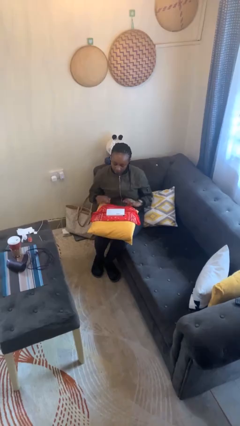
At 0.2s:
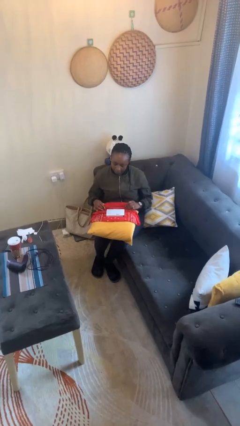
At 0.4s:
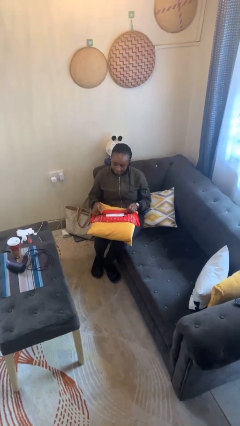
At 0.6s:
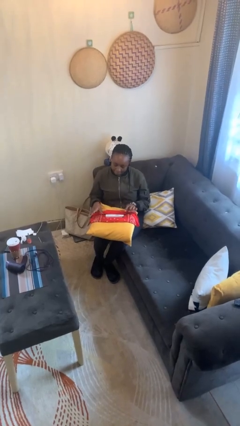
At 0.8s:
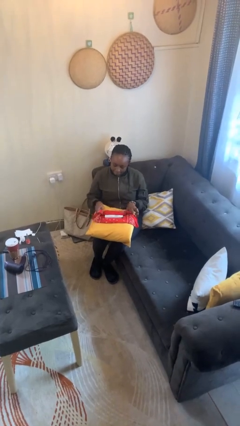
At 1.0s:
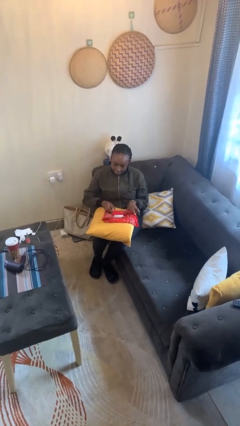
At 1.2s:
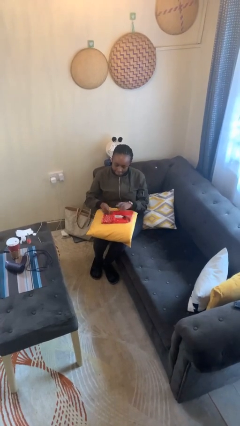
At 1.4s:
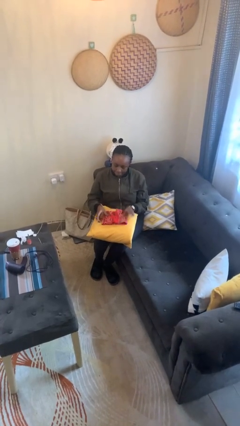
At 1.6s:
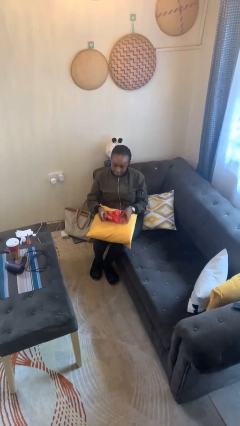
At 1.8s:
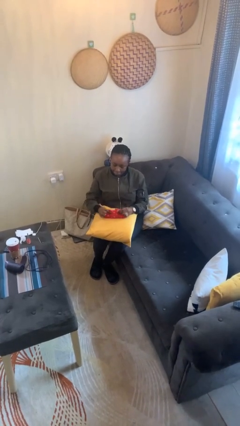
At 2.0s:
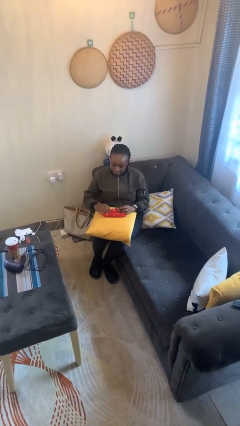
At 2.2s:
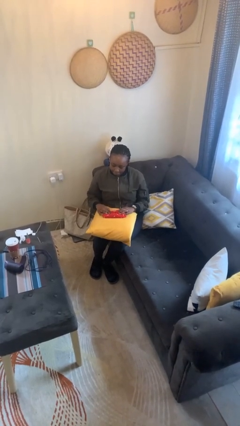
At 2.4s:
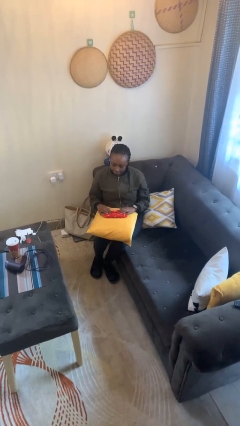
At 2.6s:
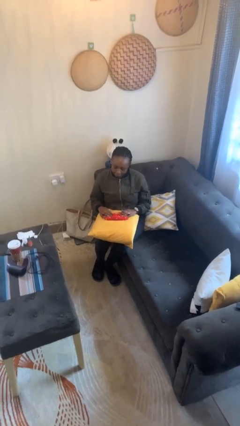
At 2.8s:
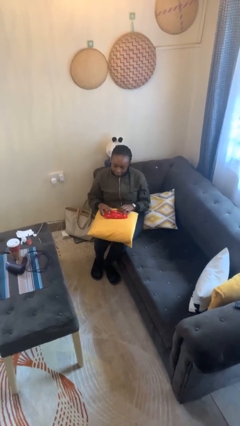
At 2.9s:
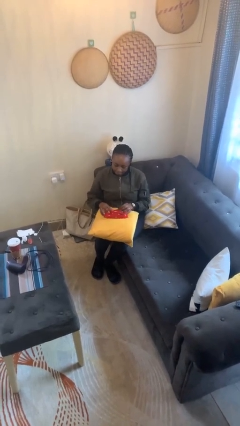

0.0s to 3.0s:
person wraps box

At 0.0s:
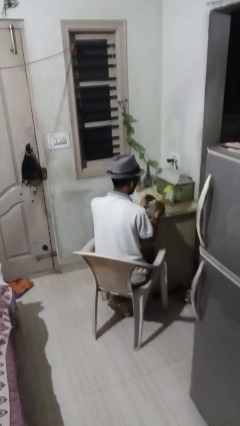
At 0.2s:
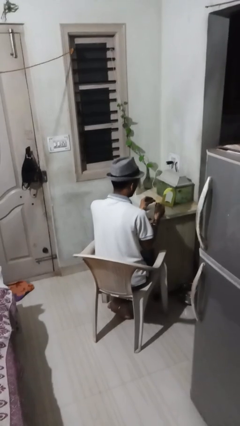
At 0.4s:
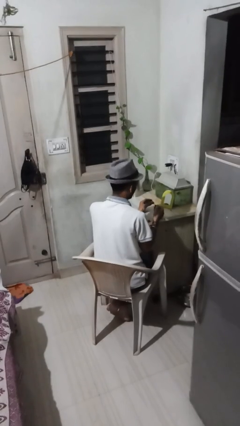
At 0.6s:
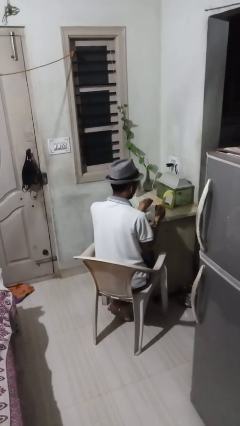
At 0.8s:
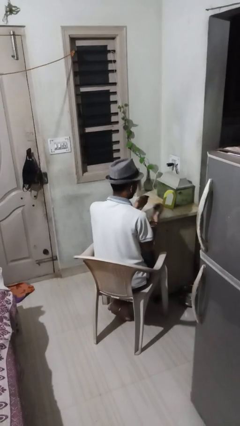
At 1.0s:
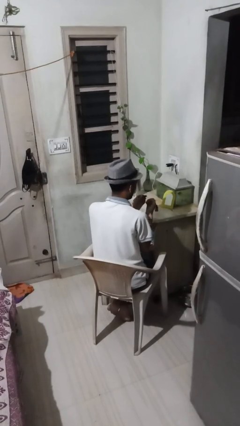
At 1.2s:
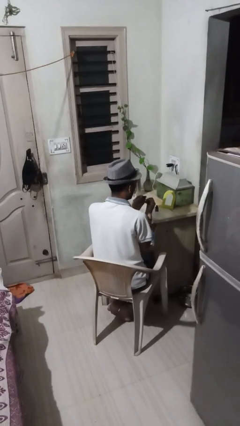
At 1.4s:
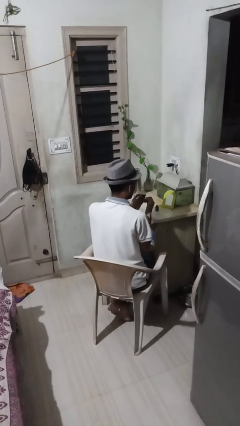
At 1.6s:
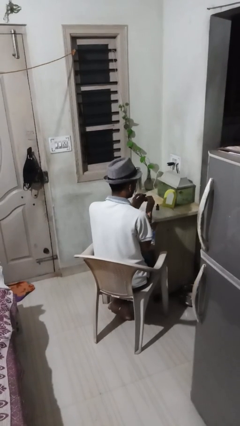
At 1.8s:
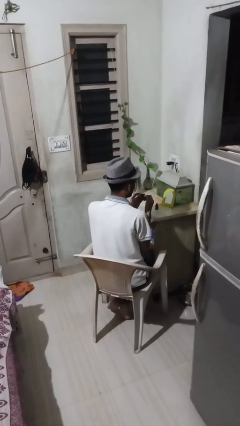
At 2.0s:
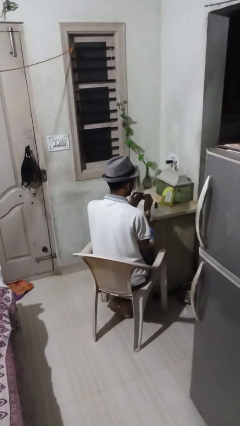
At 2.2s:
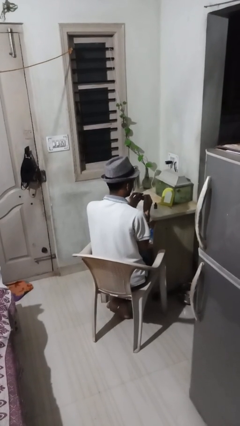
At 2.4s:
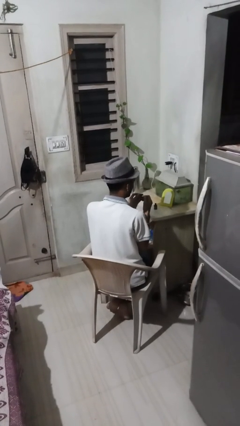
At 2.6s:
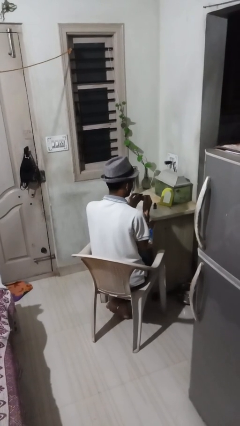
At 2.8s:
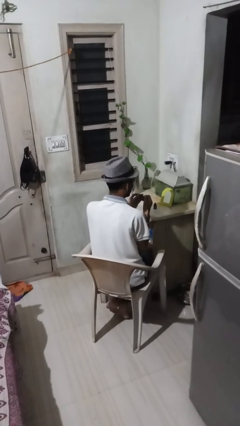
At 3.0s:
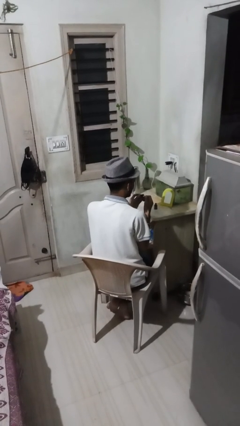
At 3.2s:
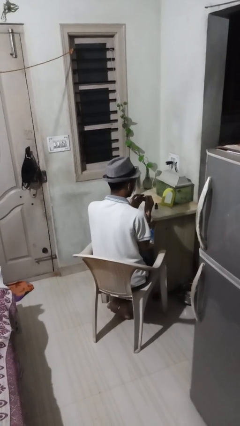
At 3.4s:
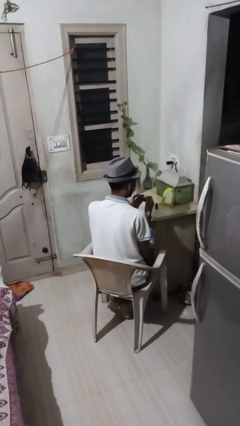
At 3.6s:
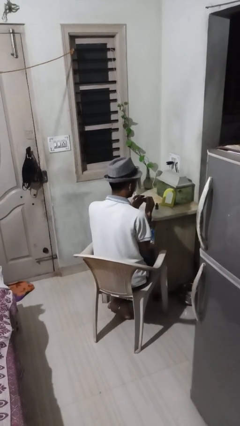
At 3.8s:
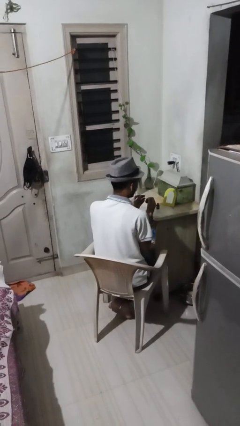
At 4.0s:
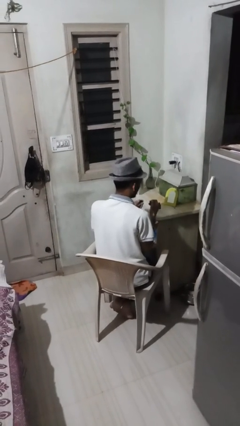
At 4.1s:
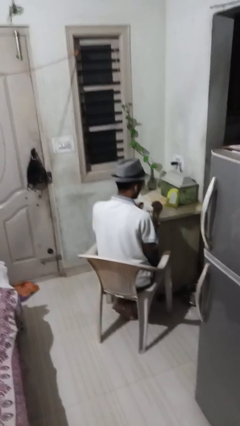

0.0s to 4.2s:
person paints fingernails

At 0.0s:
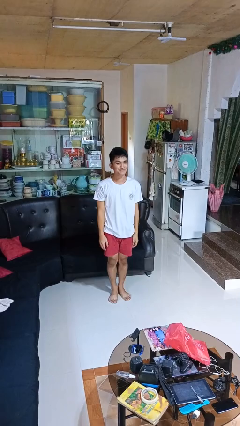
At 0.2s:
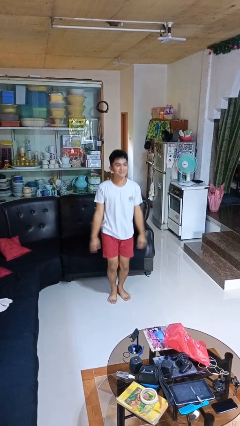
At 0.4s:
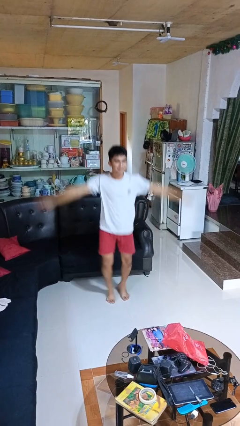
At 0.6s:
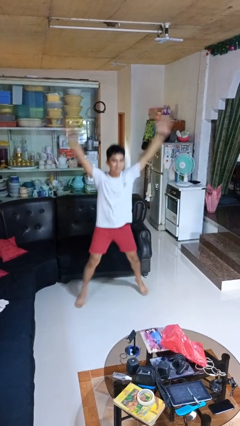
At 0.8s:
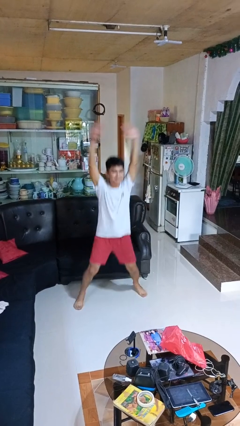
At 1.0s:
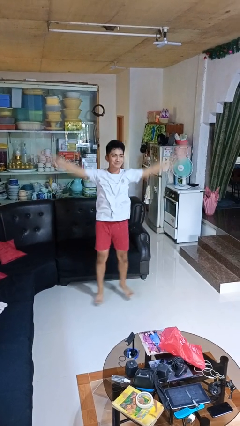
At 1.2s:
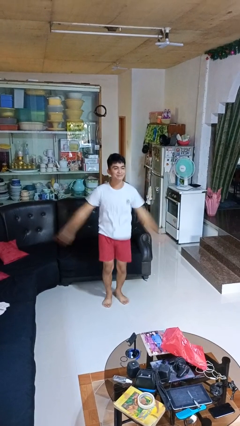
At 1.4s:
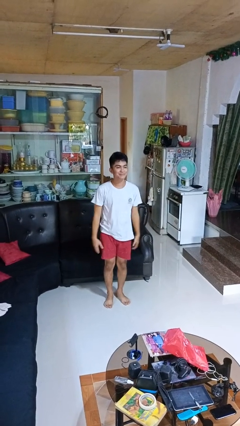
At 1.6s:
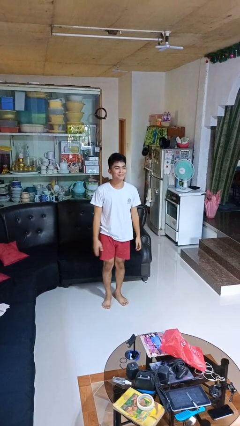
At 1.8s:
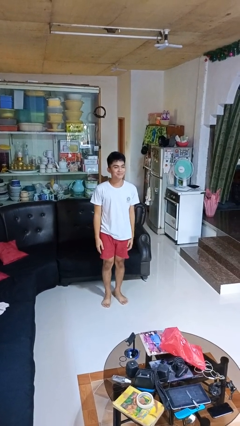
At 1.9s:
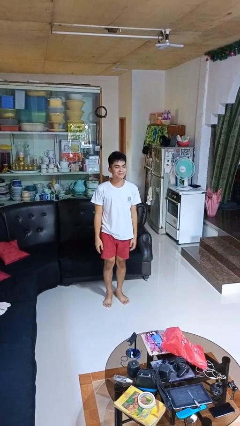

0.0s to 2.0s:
person exercises with jumping jacks

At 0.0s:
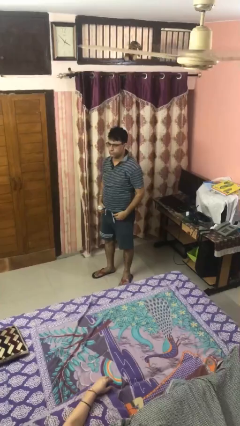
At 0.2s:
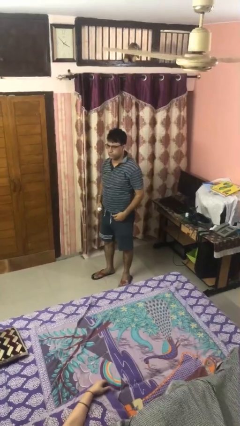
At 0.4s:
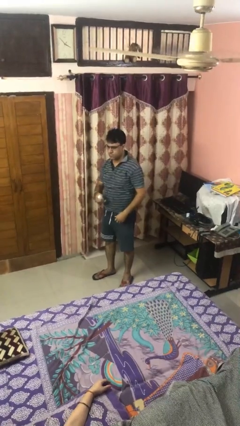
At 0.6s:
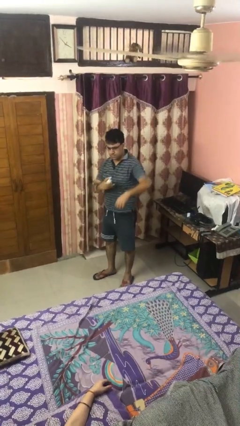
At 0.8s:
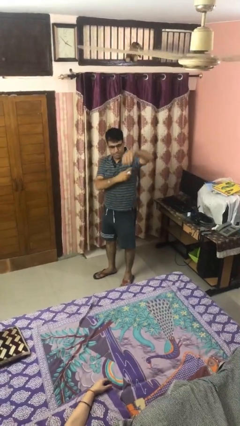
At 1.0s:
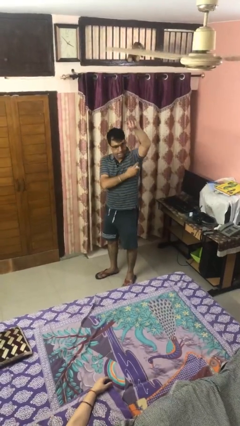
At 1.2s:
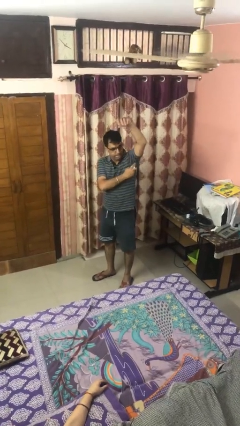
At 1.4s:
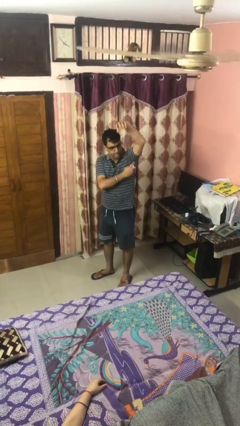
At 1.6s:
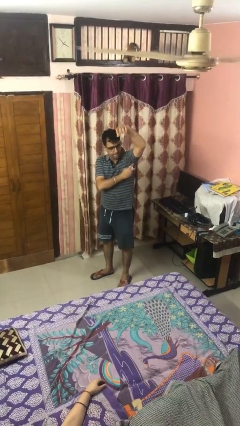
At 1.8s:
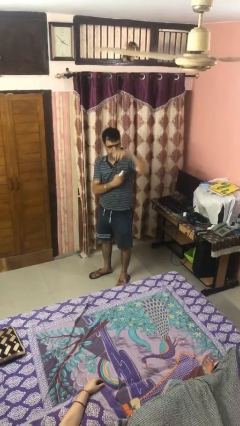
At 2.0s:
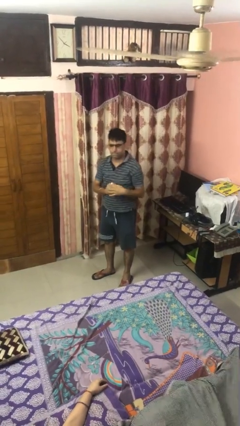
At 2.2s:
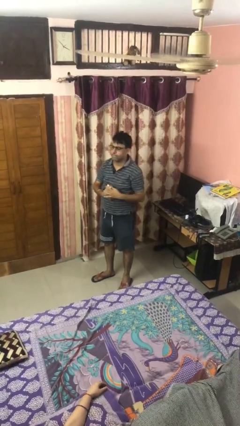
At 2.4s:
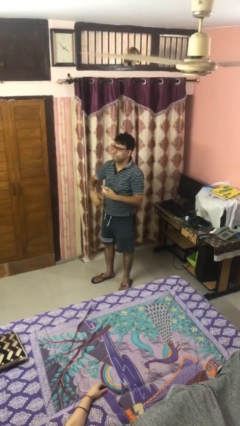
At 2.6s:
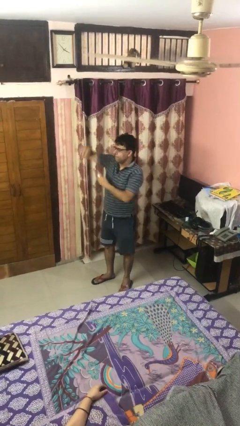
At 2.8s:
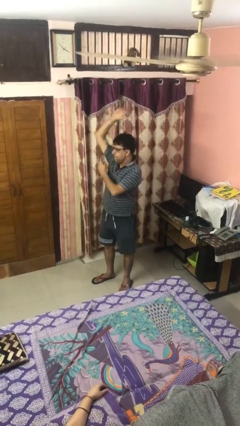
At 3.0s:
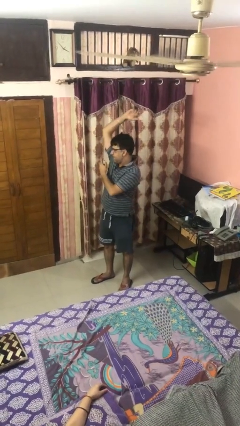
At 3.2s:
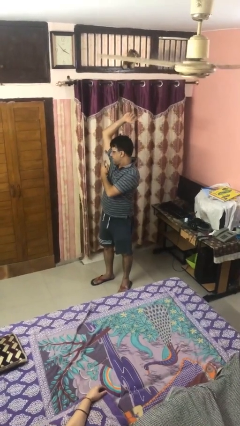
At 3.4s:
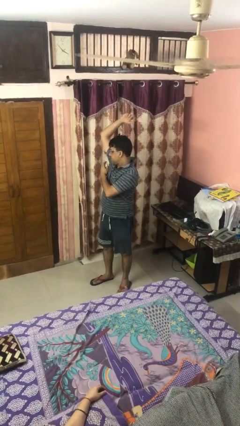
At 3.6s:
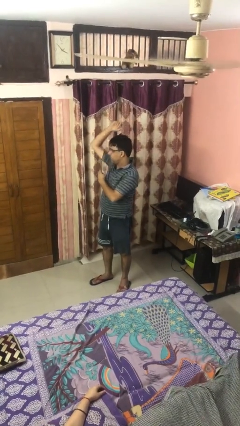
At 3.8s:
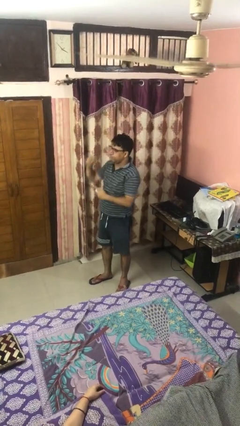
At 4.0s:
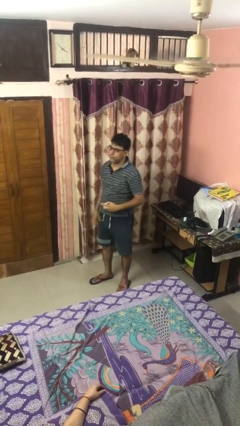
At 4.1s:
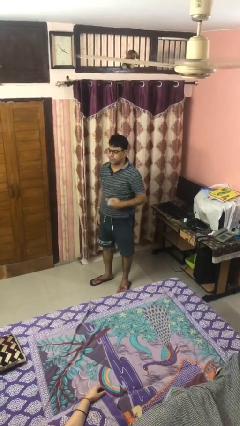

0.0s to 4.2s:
person applies deodorant

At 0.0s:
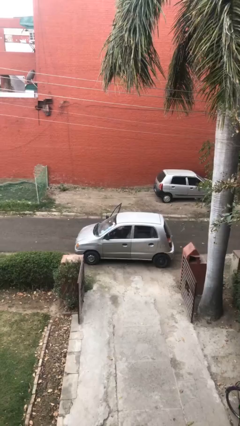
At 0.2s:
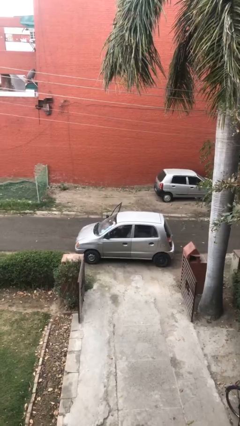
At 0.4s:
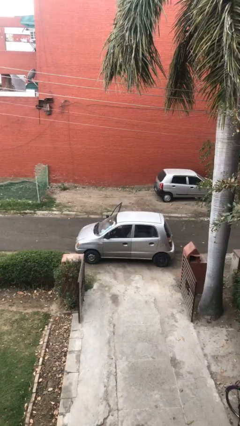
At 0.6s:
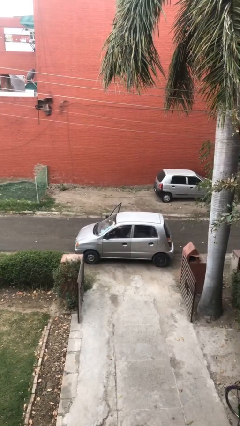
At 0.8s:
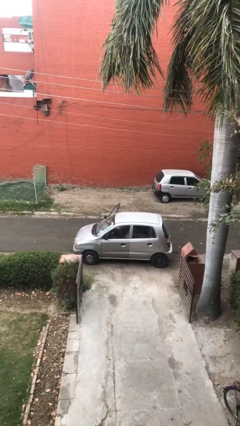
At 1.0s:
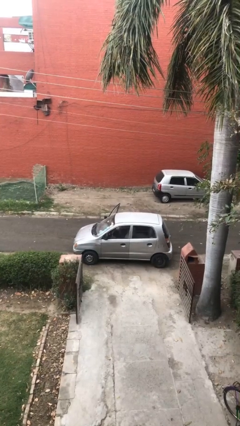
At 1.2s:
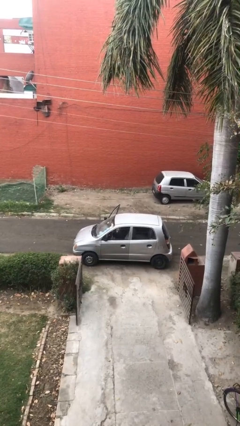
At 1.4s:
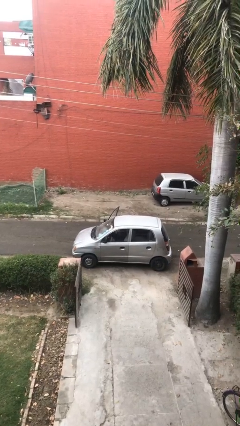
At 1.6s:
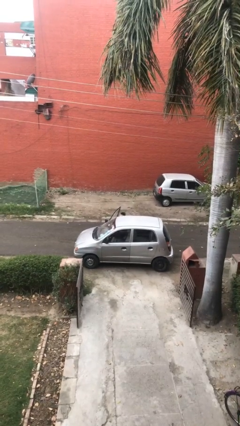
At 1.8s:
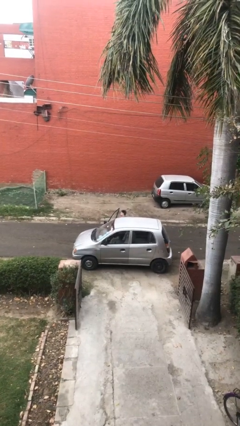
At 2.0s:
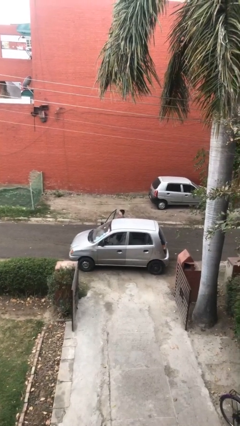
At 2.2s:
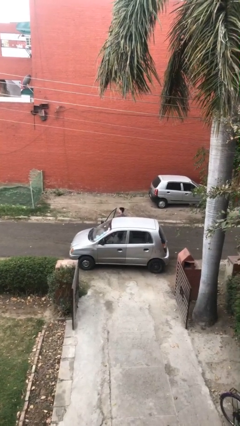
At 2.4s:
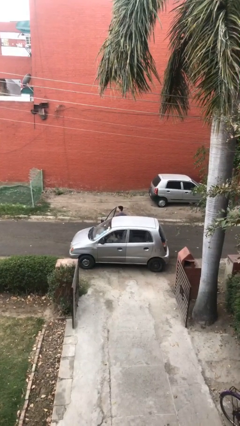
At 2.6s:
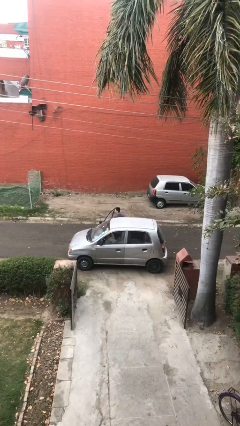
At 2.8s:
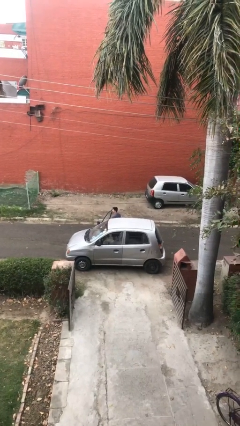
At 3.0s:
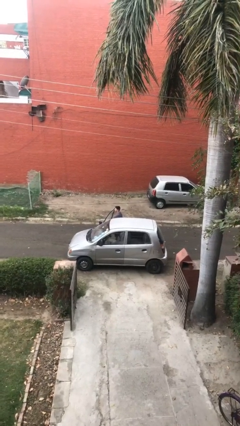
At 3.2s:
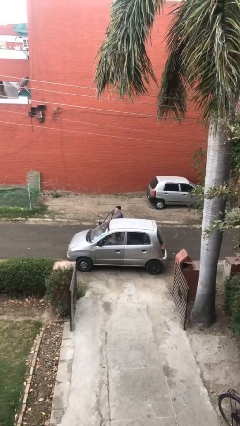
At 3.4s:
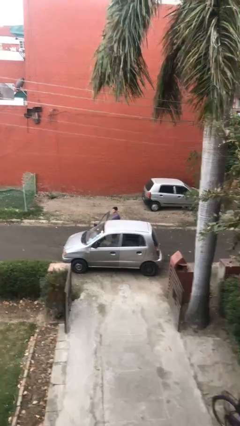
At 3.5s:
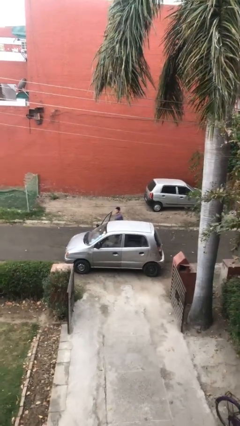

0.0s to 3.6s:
person exits car

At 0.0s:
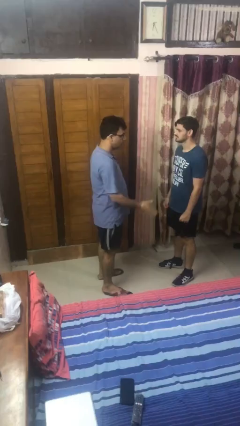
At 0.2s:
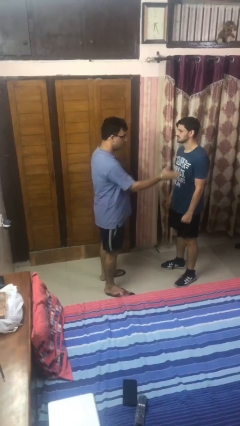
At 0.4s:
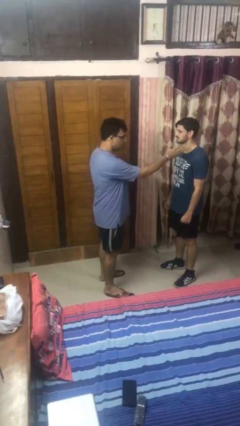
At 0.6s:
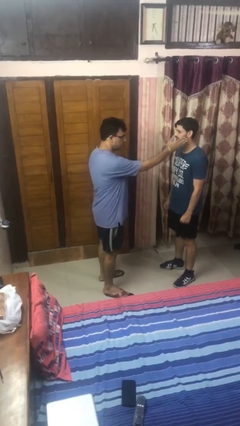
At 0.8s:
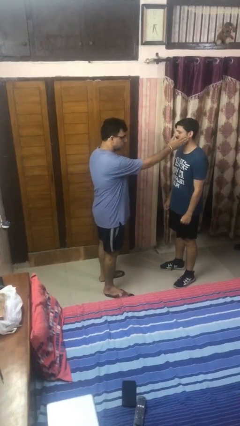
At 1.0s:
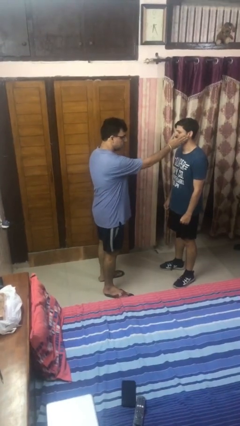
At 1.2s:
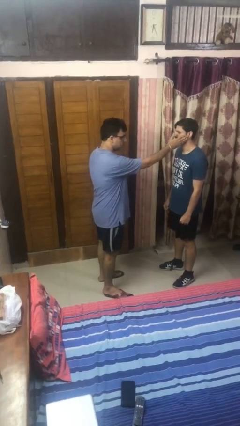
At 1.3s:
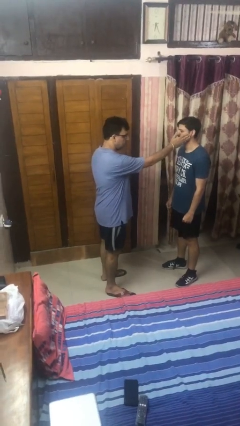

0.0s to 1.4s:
person touches face of person
